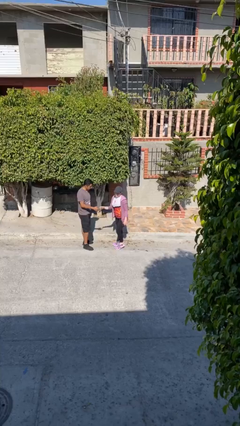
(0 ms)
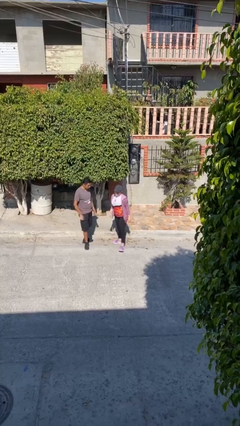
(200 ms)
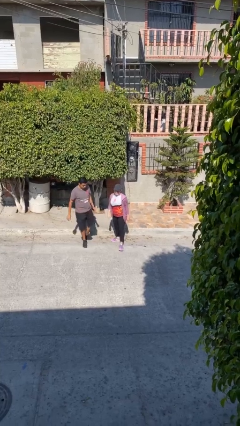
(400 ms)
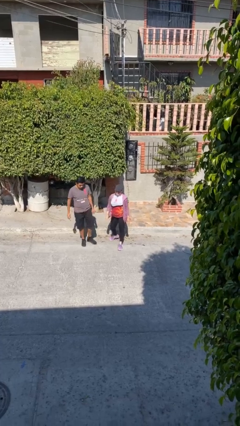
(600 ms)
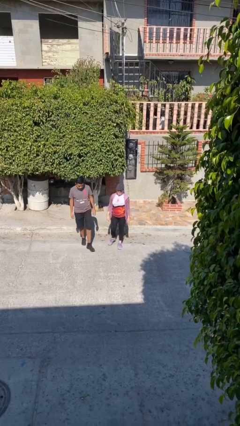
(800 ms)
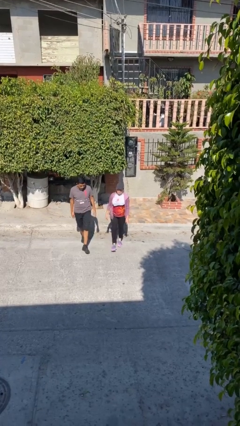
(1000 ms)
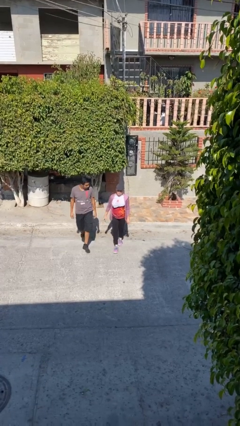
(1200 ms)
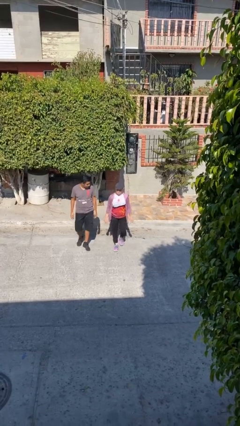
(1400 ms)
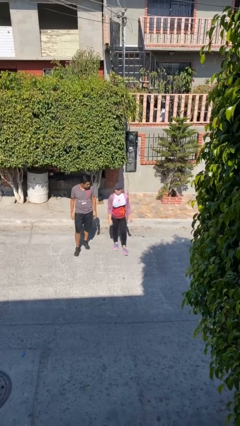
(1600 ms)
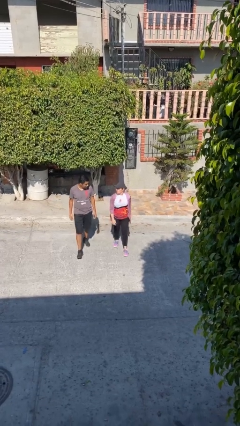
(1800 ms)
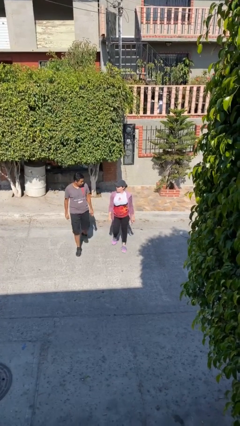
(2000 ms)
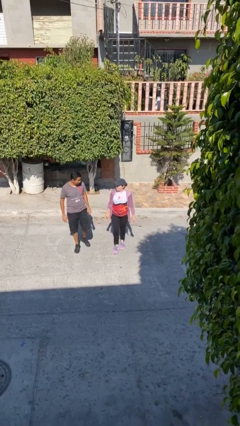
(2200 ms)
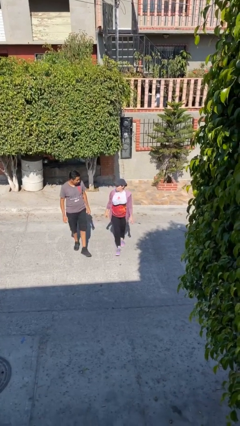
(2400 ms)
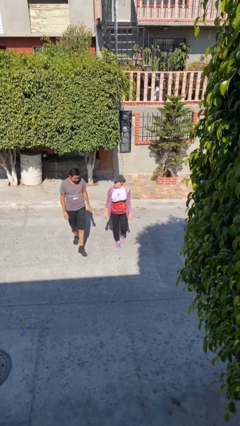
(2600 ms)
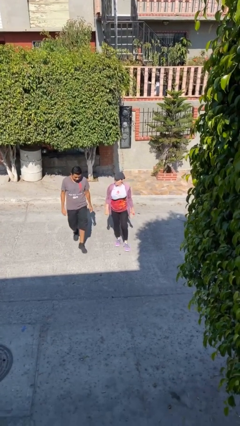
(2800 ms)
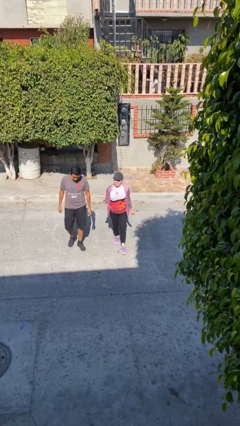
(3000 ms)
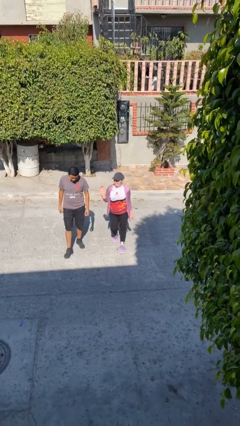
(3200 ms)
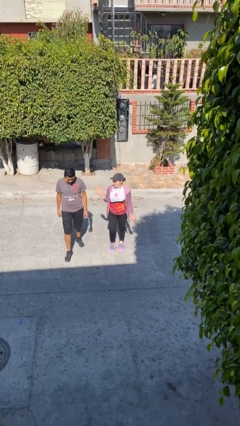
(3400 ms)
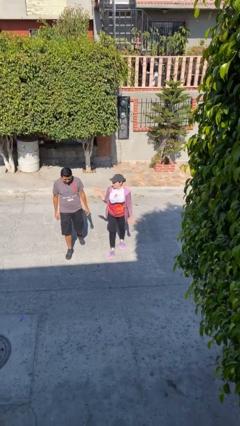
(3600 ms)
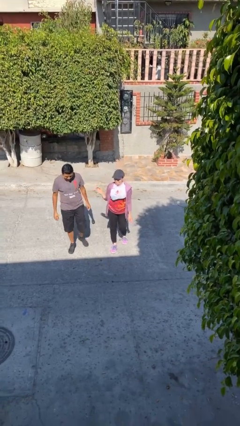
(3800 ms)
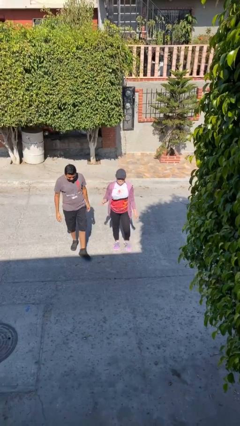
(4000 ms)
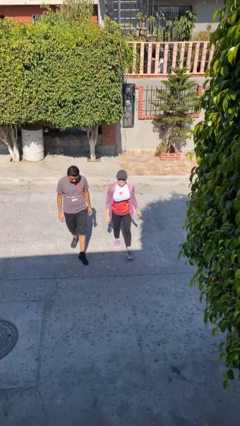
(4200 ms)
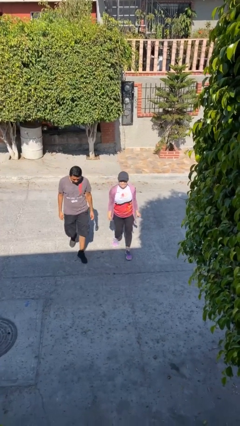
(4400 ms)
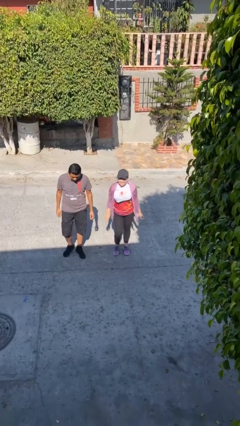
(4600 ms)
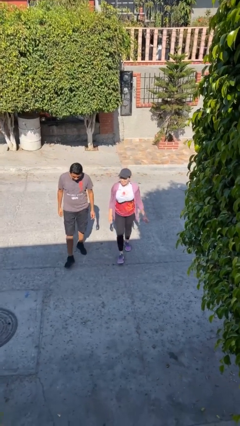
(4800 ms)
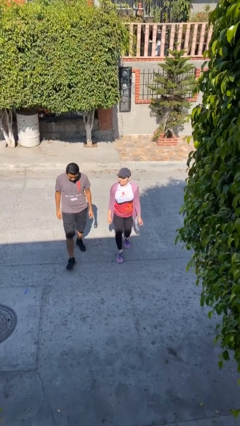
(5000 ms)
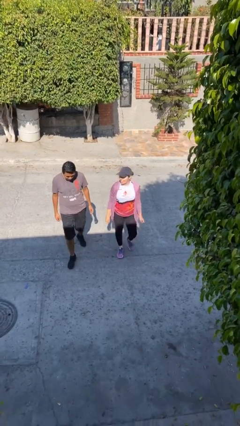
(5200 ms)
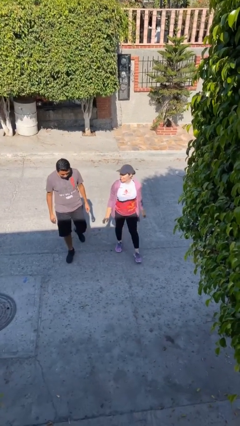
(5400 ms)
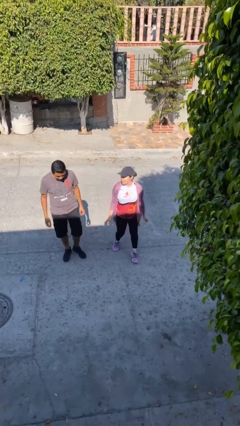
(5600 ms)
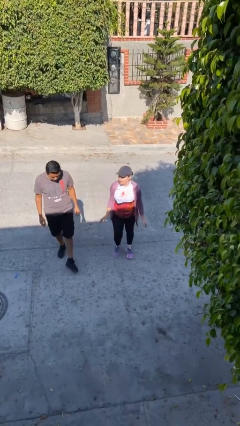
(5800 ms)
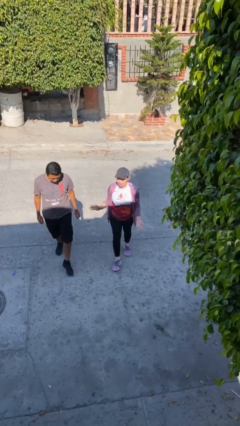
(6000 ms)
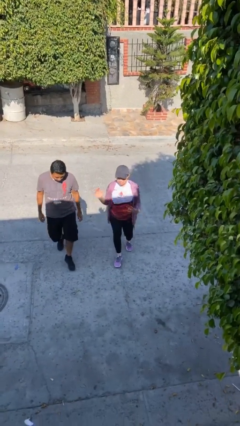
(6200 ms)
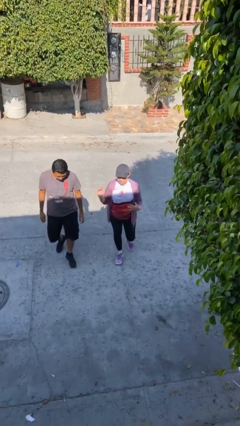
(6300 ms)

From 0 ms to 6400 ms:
person talks to person

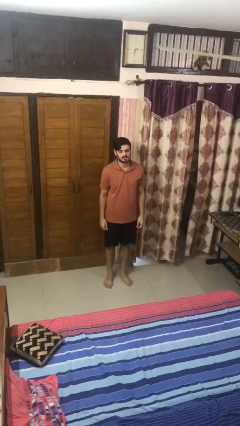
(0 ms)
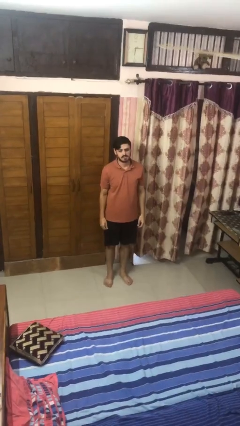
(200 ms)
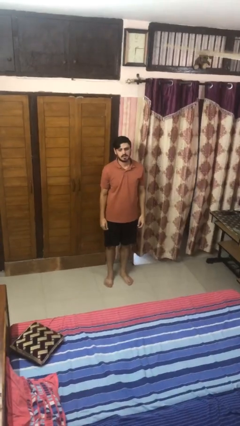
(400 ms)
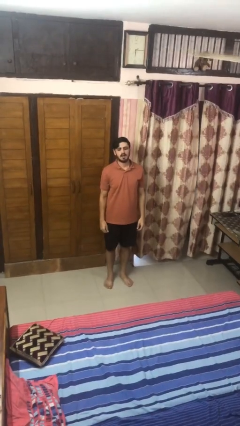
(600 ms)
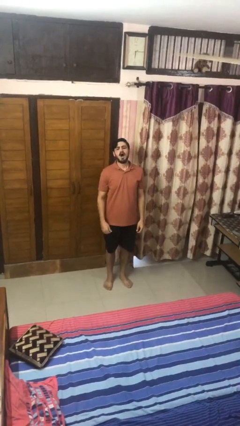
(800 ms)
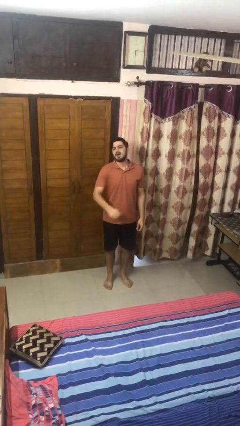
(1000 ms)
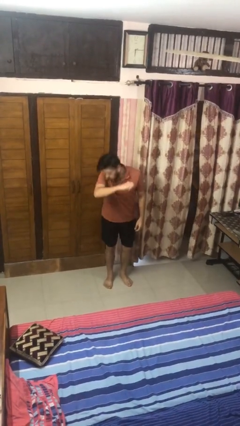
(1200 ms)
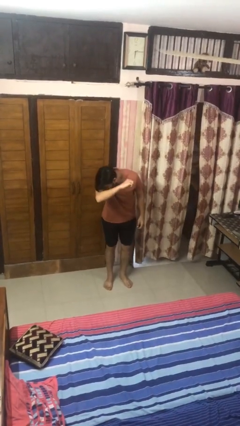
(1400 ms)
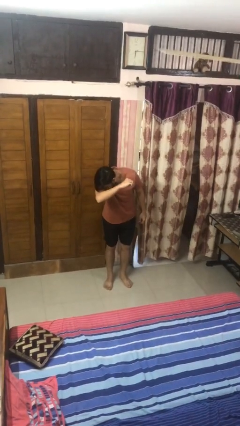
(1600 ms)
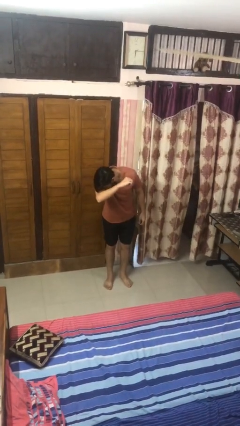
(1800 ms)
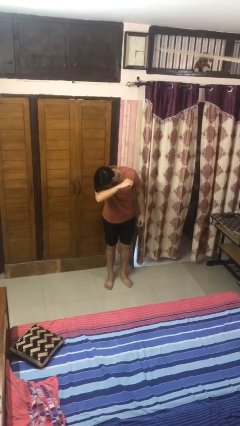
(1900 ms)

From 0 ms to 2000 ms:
person sneezes into arm

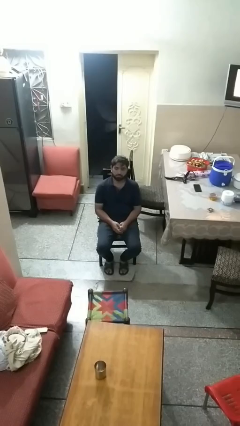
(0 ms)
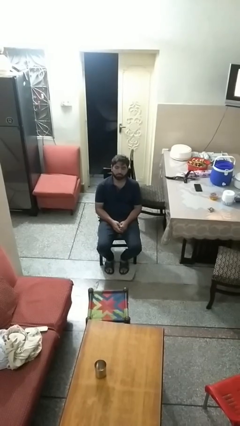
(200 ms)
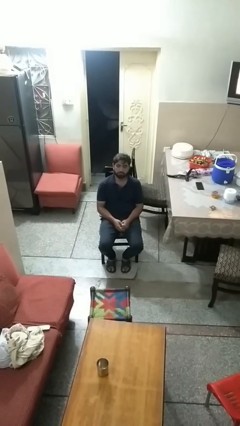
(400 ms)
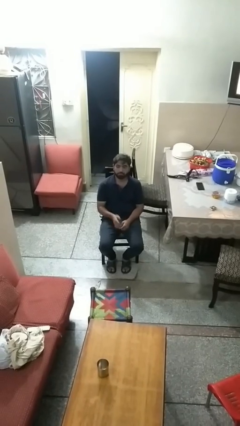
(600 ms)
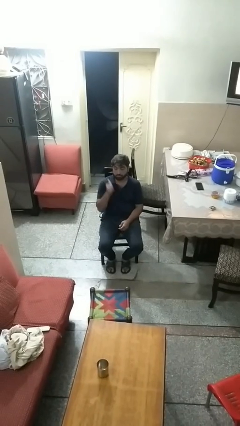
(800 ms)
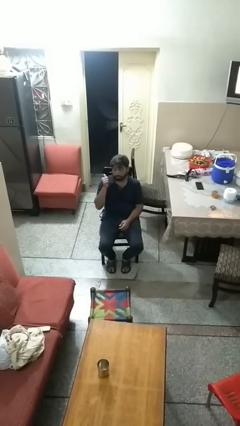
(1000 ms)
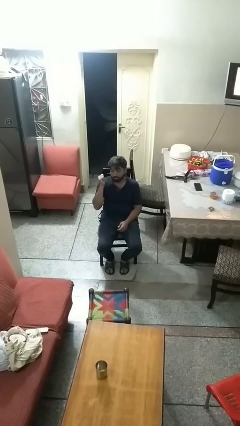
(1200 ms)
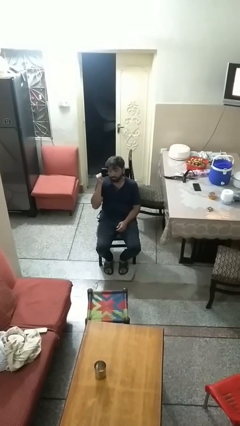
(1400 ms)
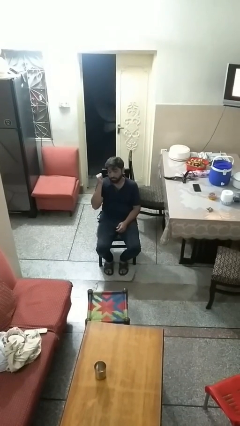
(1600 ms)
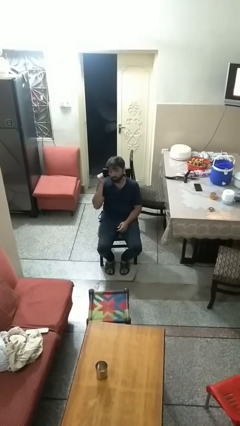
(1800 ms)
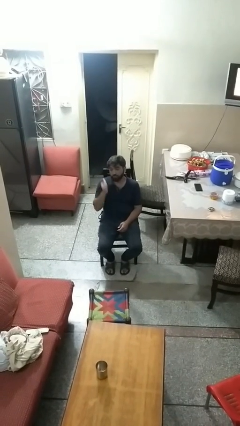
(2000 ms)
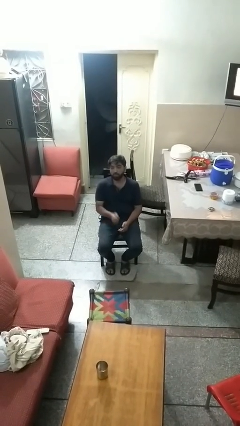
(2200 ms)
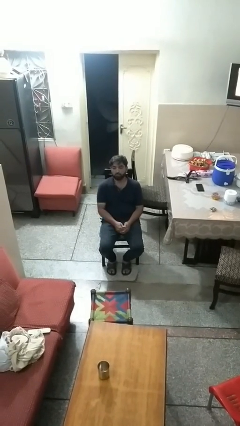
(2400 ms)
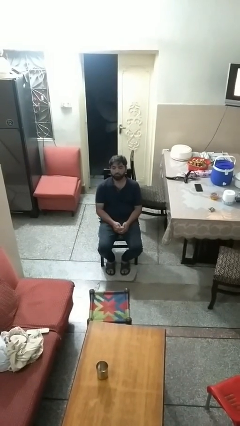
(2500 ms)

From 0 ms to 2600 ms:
person gestures behind me

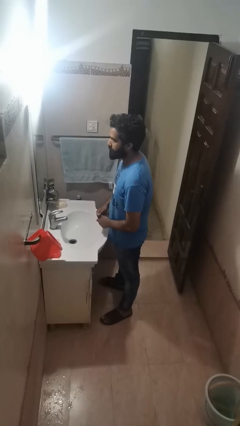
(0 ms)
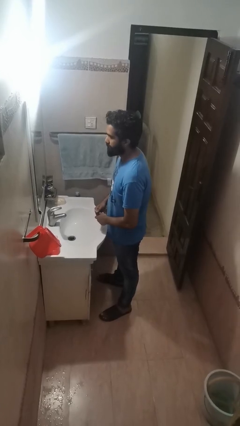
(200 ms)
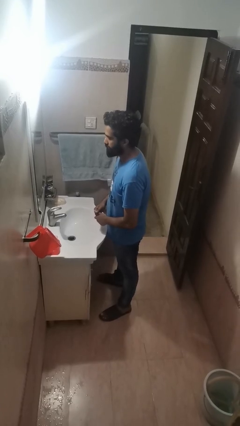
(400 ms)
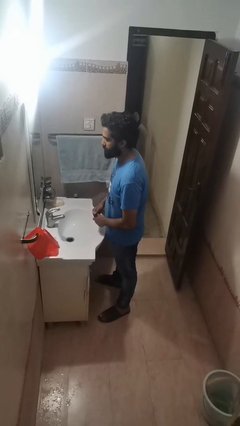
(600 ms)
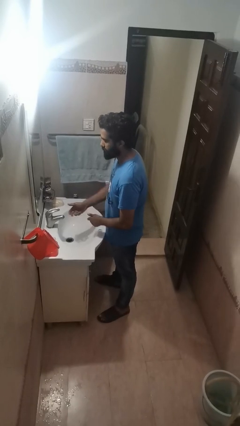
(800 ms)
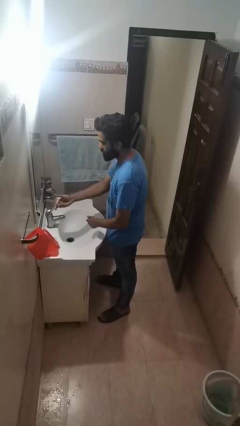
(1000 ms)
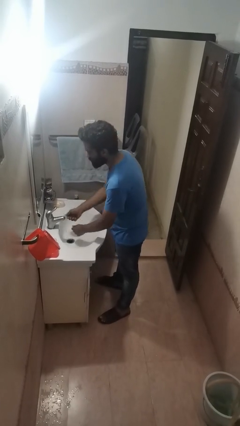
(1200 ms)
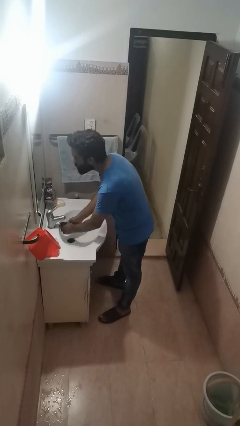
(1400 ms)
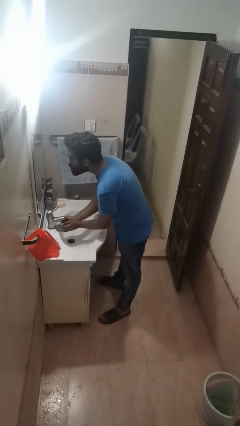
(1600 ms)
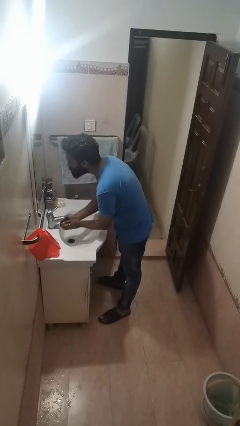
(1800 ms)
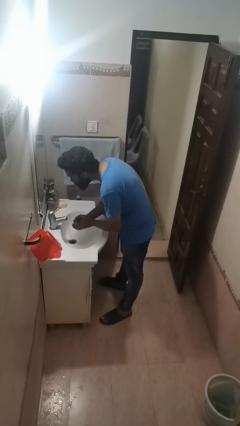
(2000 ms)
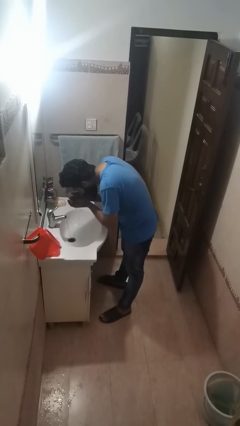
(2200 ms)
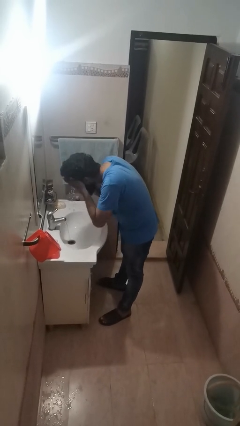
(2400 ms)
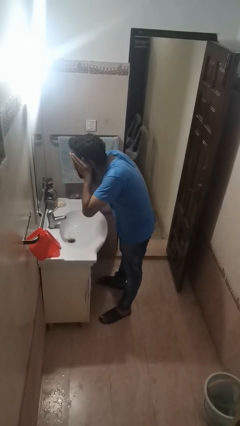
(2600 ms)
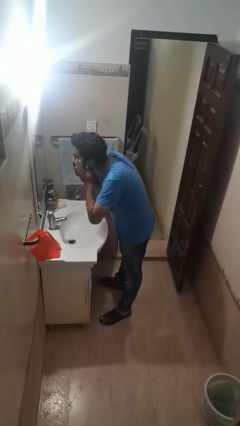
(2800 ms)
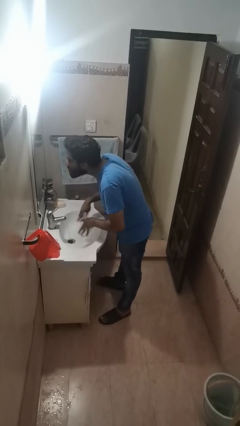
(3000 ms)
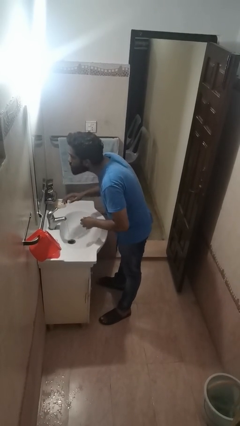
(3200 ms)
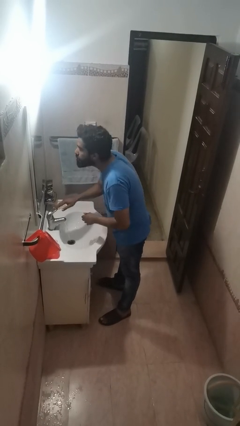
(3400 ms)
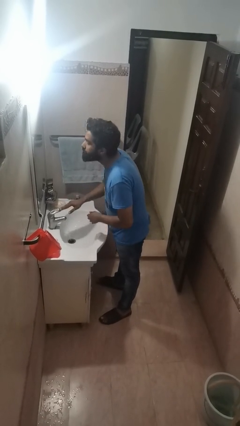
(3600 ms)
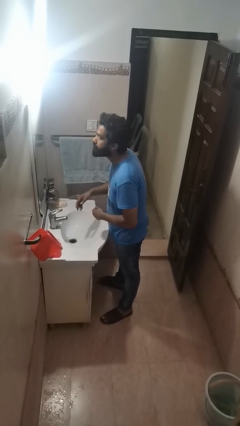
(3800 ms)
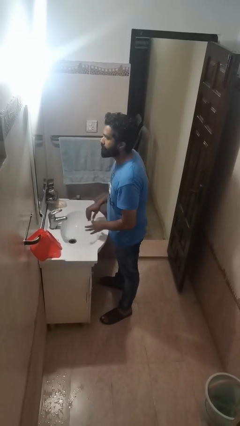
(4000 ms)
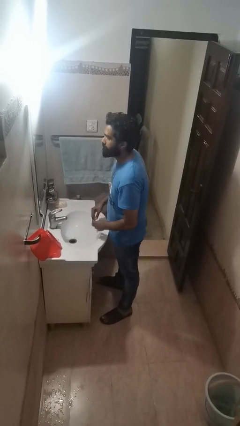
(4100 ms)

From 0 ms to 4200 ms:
person washes face

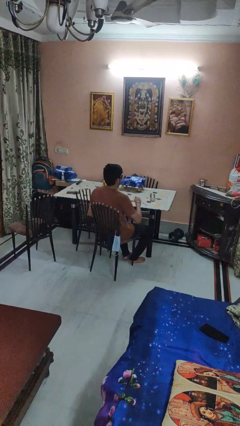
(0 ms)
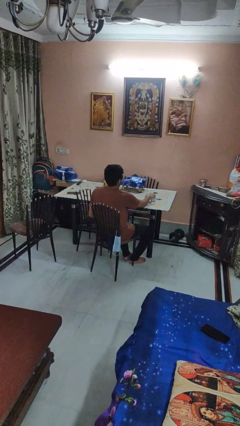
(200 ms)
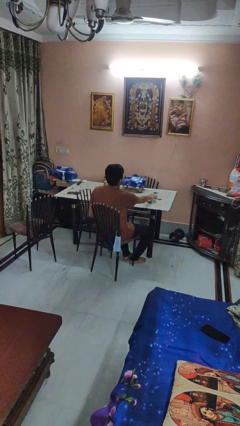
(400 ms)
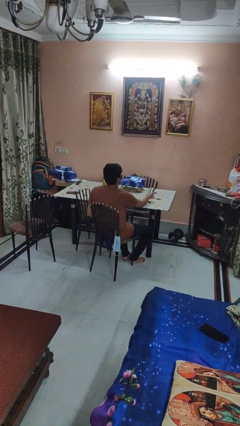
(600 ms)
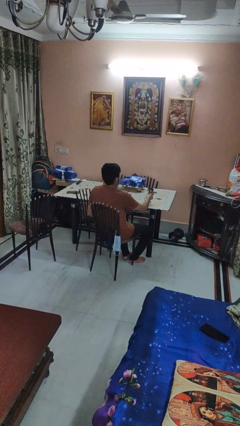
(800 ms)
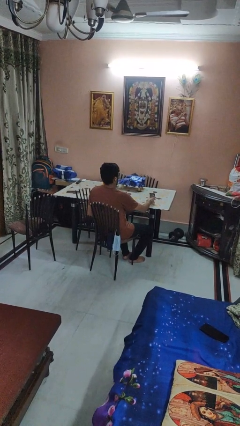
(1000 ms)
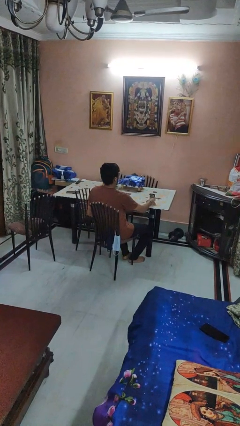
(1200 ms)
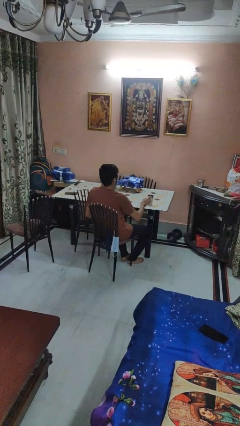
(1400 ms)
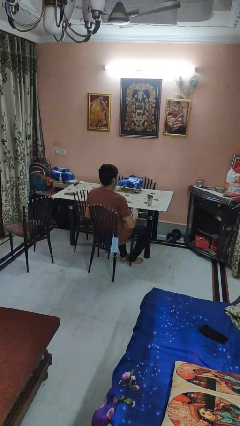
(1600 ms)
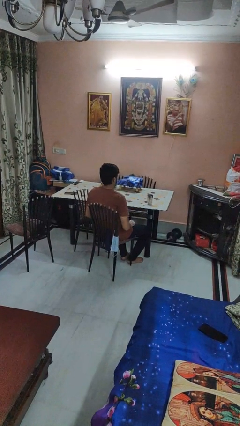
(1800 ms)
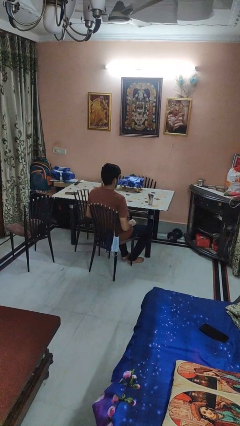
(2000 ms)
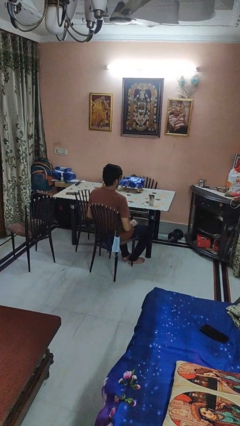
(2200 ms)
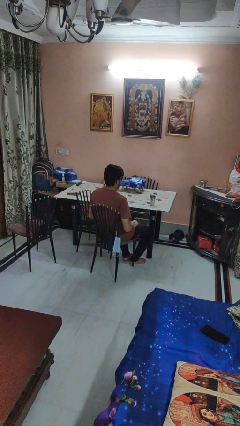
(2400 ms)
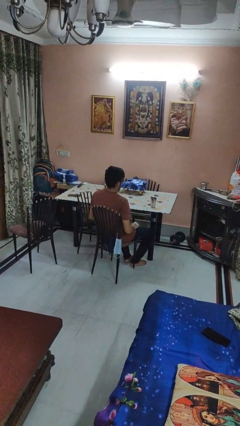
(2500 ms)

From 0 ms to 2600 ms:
person sets upright glass
